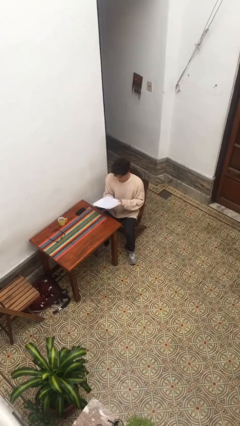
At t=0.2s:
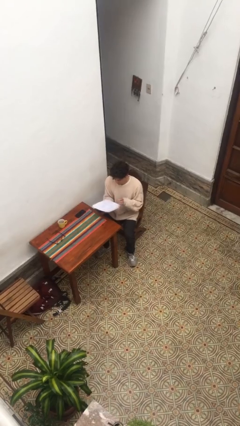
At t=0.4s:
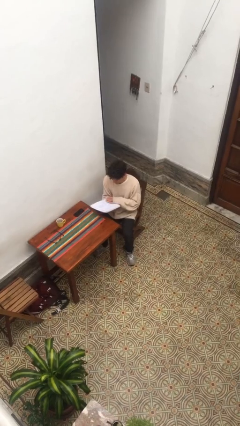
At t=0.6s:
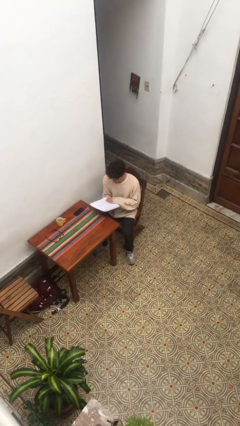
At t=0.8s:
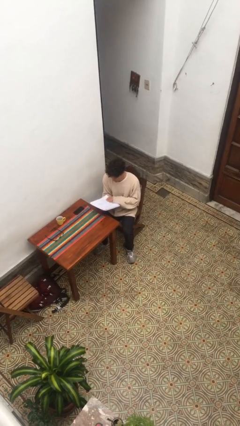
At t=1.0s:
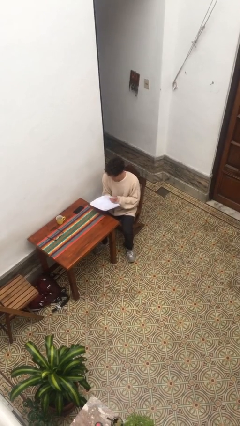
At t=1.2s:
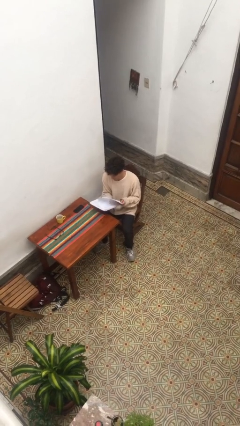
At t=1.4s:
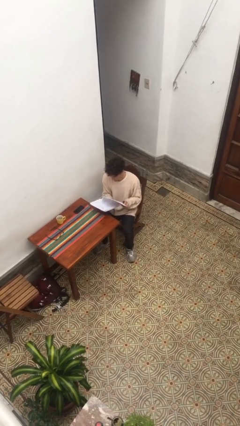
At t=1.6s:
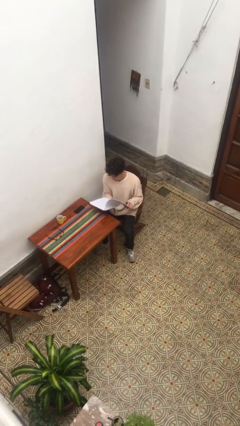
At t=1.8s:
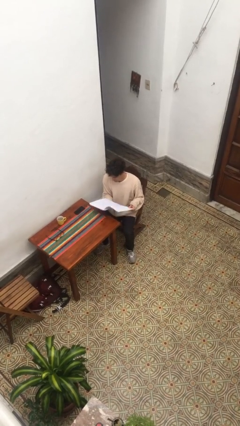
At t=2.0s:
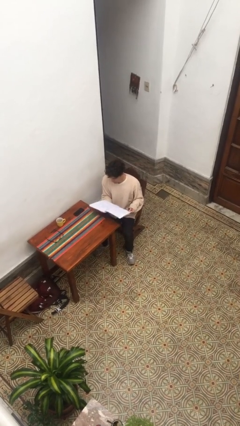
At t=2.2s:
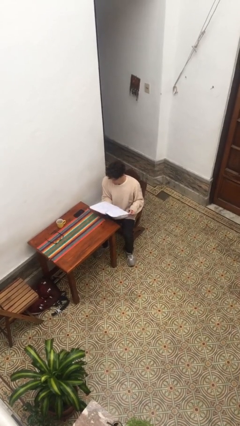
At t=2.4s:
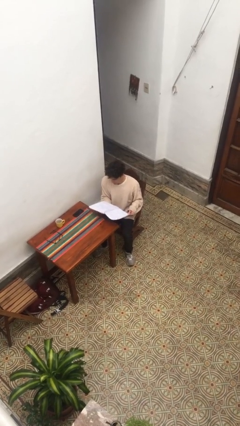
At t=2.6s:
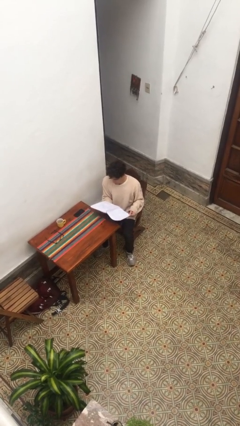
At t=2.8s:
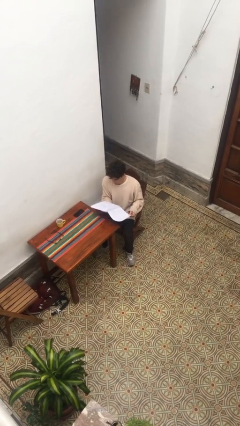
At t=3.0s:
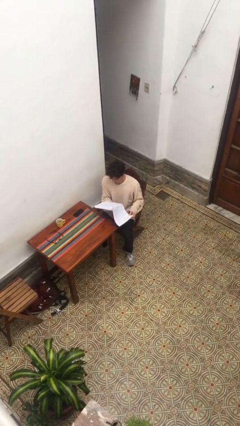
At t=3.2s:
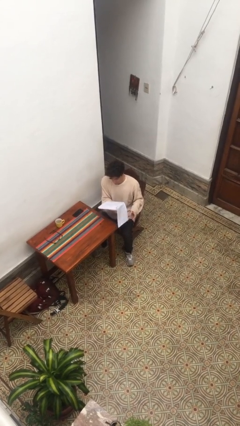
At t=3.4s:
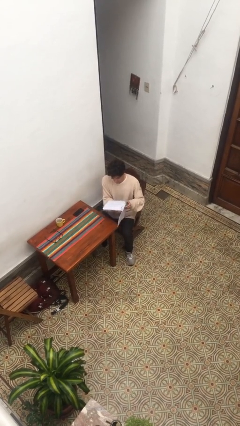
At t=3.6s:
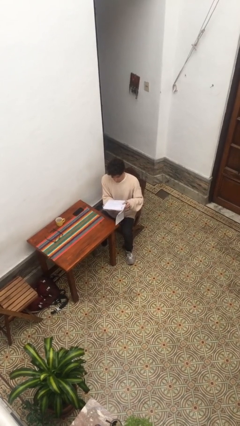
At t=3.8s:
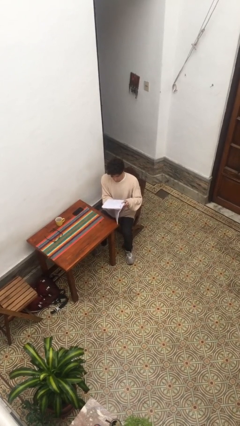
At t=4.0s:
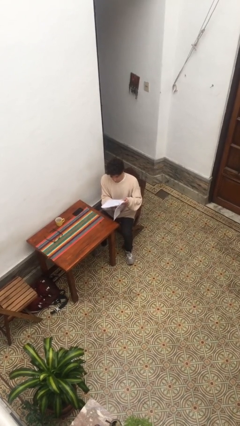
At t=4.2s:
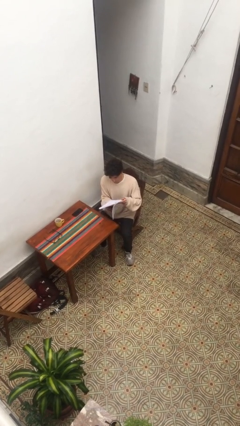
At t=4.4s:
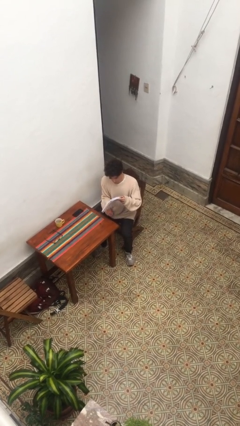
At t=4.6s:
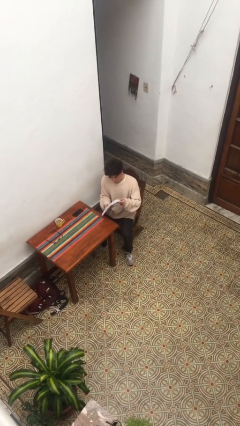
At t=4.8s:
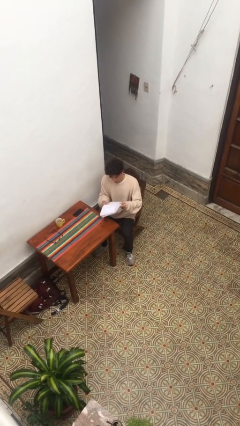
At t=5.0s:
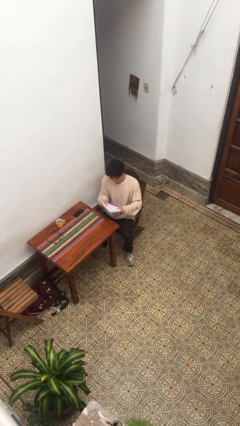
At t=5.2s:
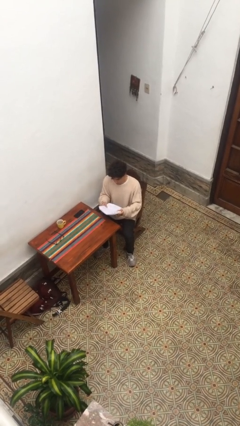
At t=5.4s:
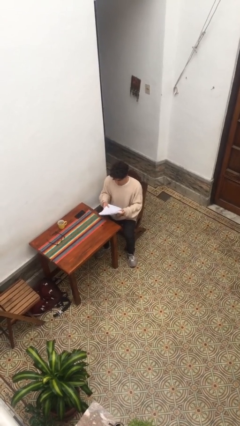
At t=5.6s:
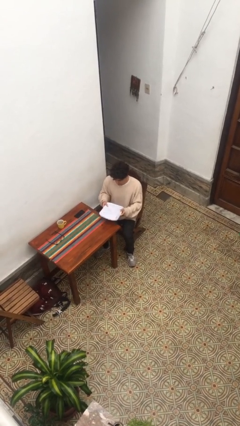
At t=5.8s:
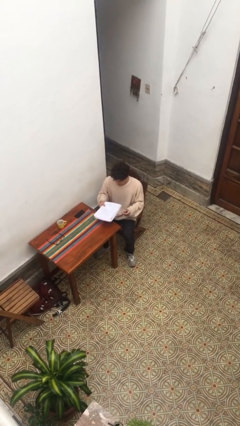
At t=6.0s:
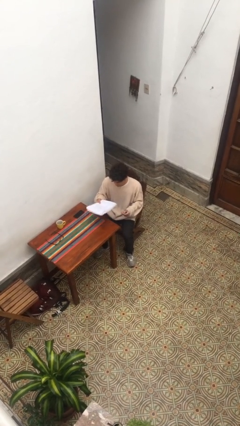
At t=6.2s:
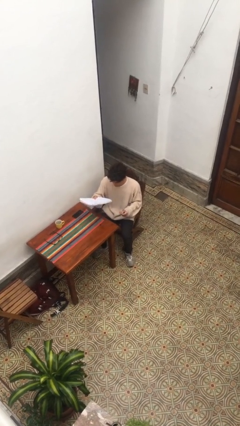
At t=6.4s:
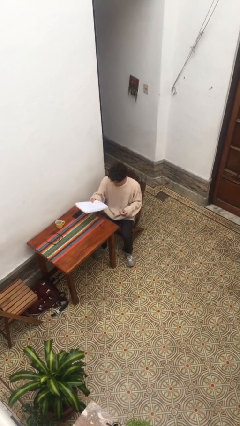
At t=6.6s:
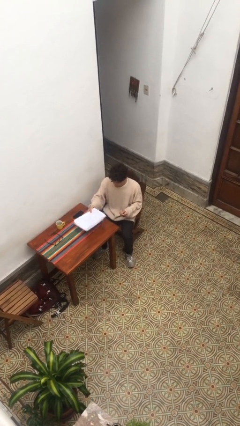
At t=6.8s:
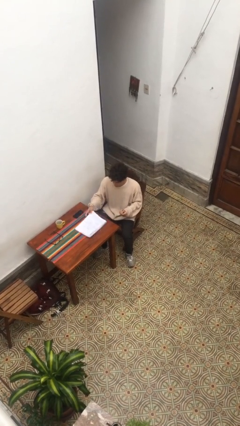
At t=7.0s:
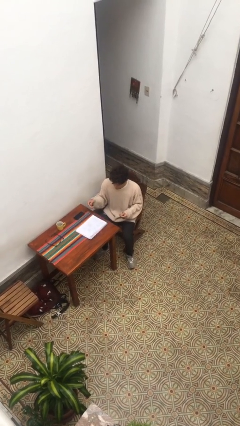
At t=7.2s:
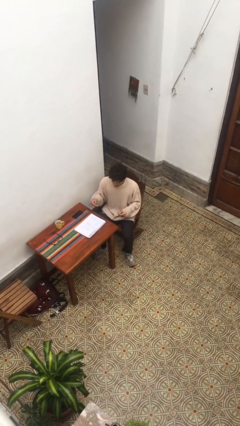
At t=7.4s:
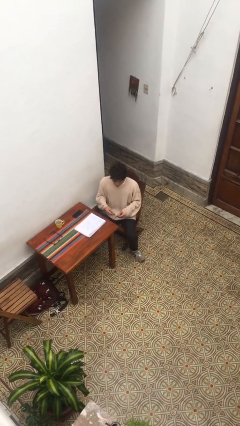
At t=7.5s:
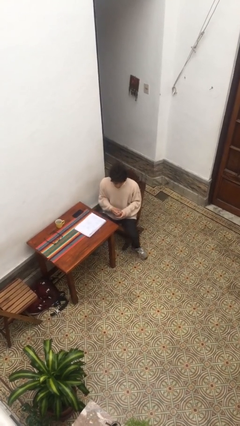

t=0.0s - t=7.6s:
person reads document

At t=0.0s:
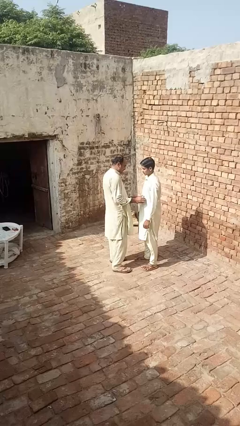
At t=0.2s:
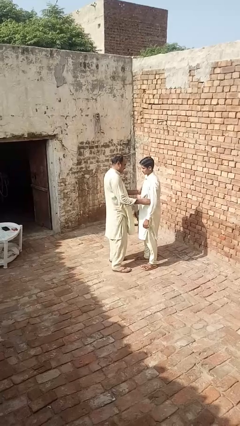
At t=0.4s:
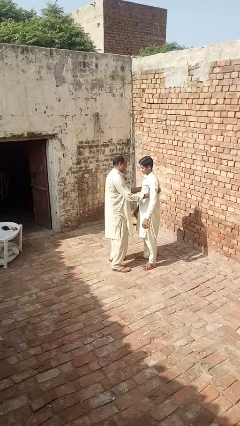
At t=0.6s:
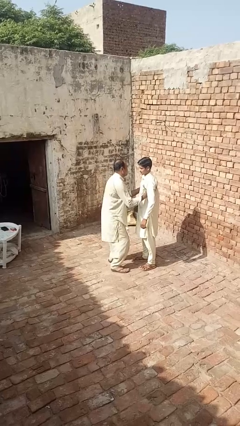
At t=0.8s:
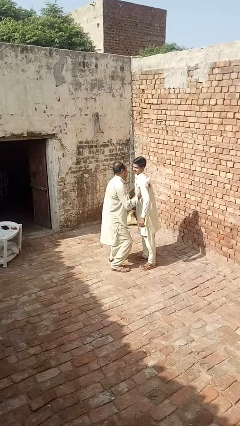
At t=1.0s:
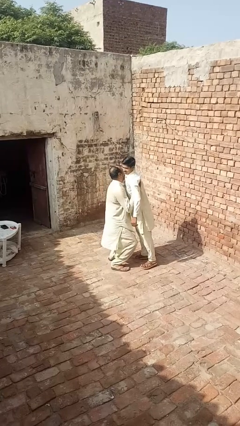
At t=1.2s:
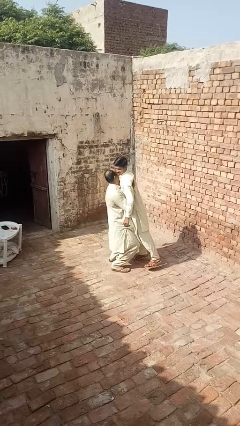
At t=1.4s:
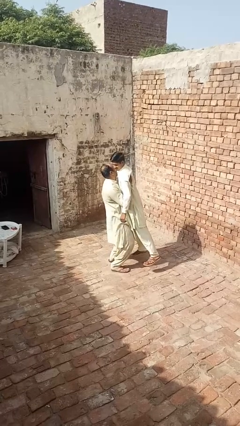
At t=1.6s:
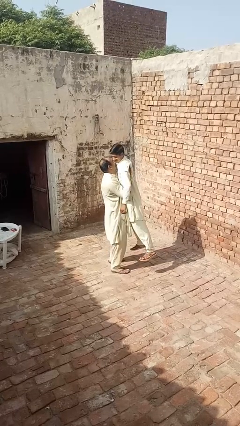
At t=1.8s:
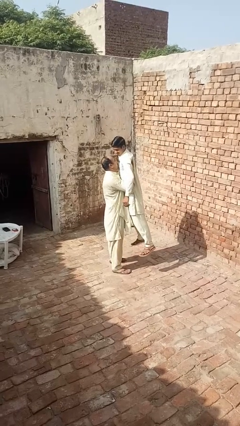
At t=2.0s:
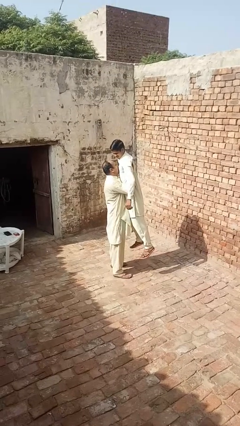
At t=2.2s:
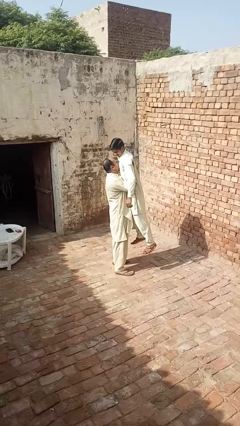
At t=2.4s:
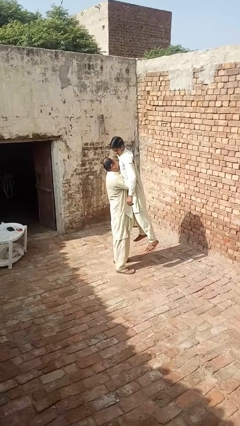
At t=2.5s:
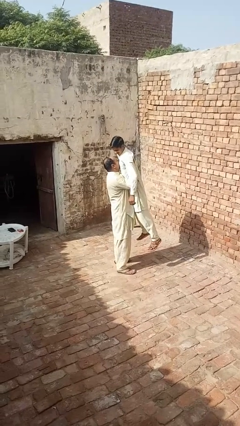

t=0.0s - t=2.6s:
person picks up person

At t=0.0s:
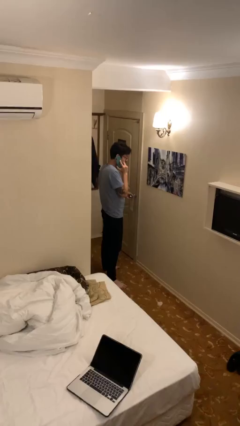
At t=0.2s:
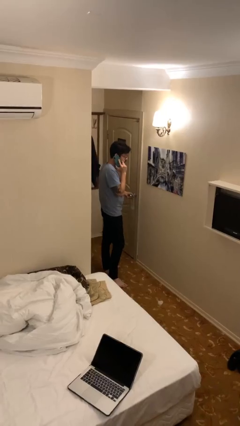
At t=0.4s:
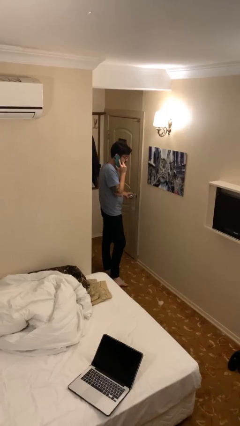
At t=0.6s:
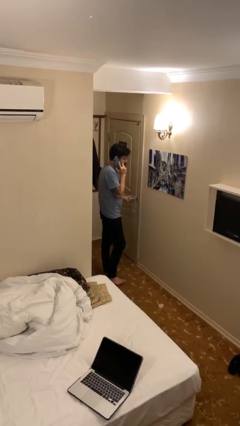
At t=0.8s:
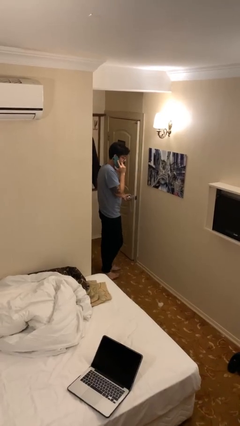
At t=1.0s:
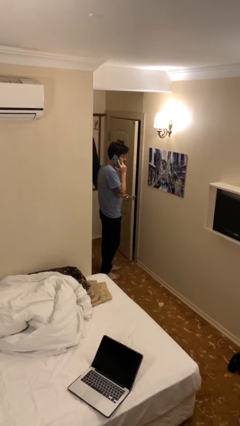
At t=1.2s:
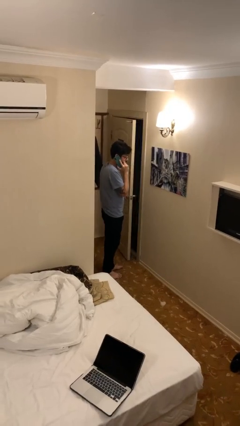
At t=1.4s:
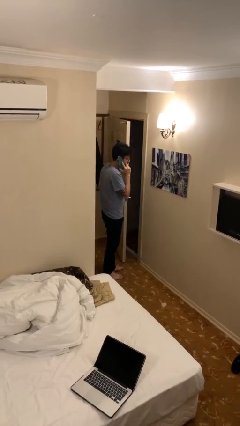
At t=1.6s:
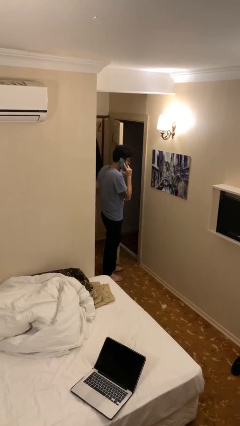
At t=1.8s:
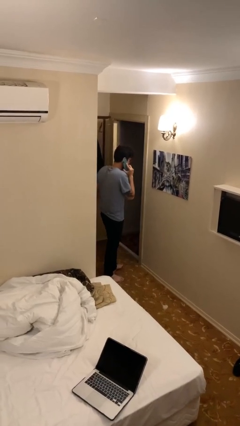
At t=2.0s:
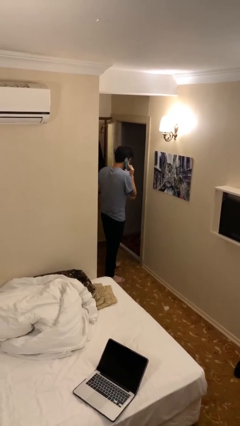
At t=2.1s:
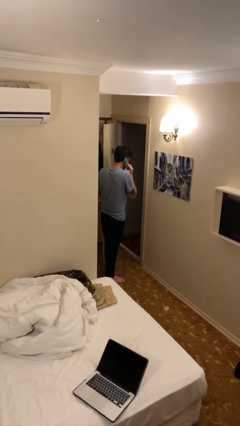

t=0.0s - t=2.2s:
person opens facility door

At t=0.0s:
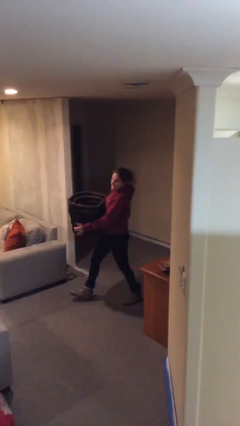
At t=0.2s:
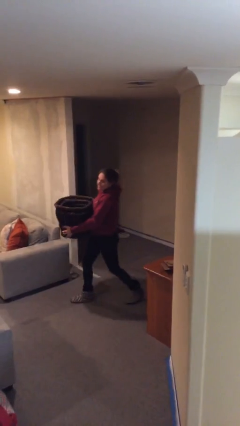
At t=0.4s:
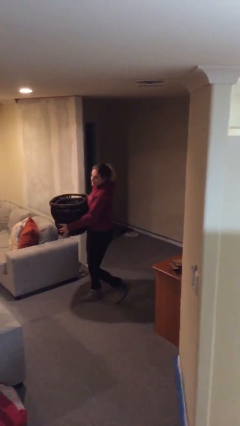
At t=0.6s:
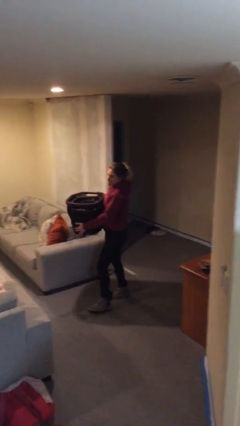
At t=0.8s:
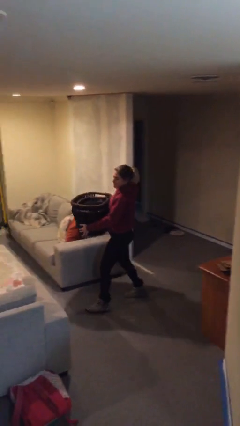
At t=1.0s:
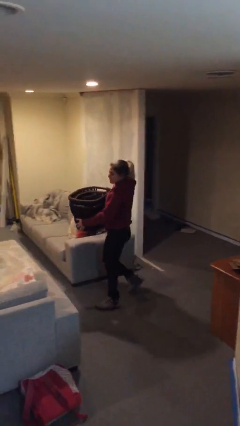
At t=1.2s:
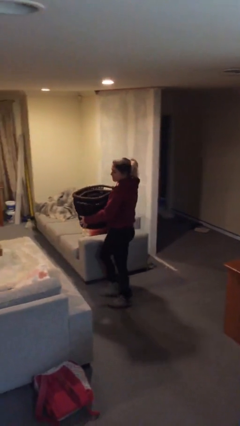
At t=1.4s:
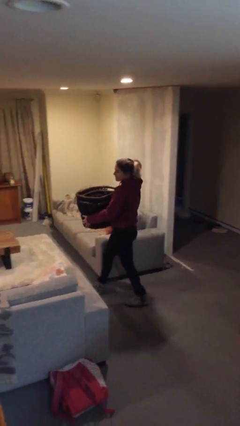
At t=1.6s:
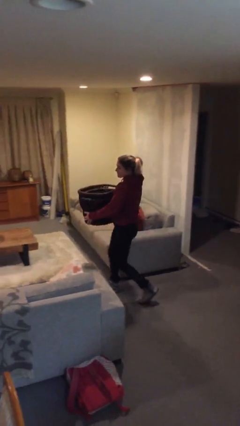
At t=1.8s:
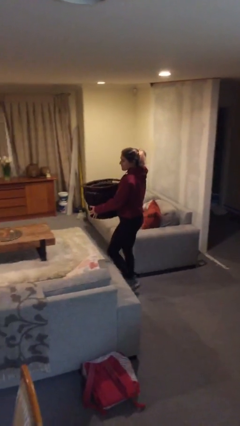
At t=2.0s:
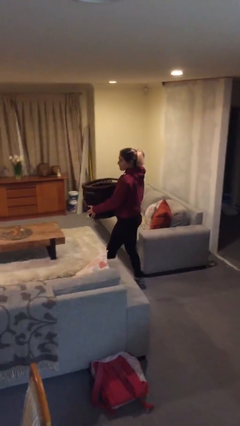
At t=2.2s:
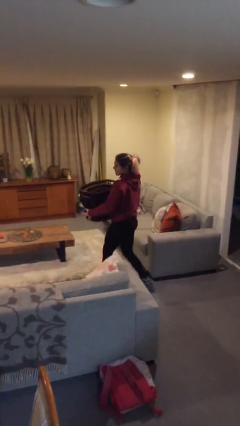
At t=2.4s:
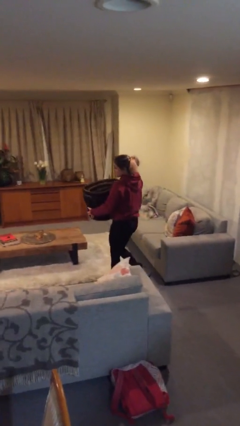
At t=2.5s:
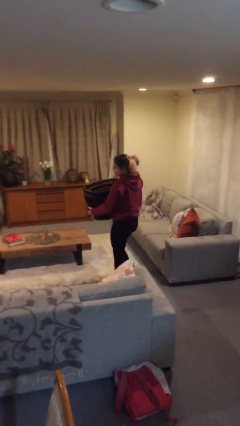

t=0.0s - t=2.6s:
person carries heavy object

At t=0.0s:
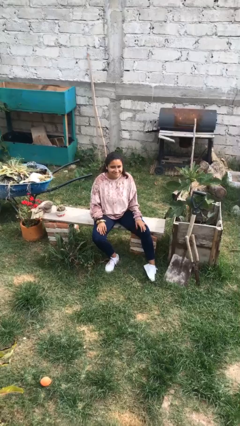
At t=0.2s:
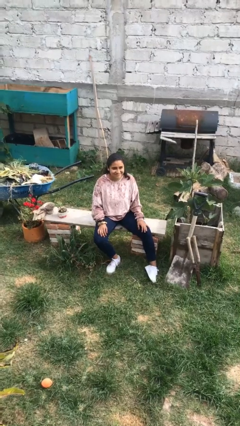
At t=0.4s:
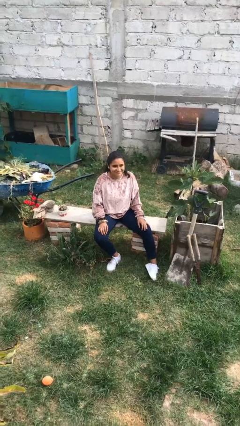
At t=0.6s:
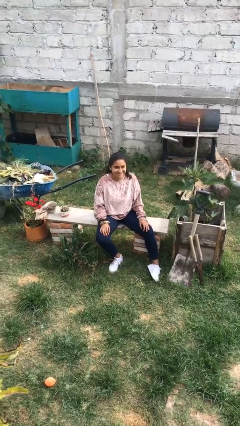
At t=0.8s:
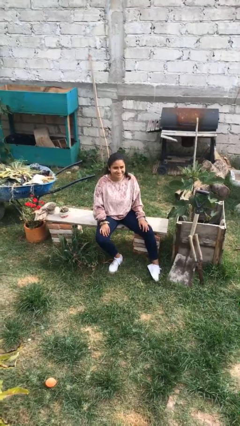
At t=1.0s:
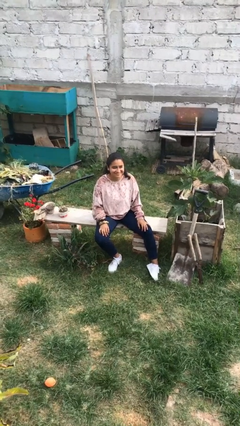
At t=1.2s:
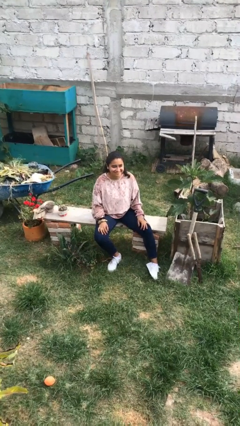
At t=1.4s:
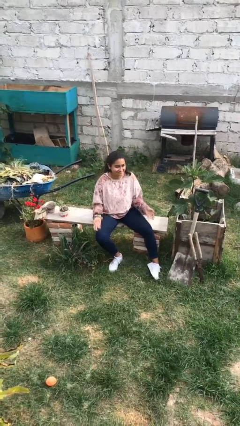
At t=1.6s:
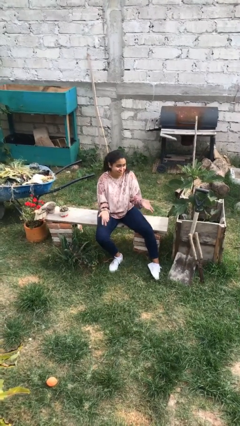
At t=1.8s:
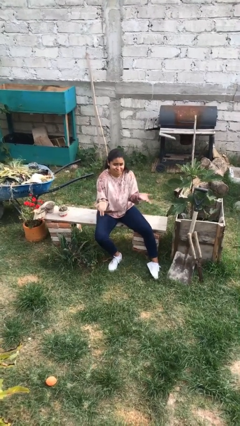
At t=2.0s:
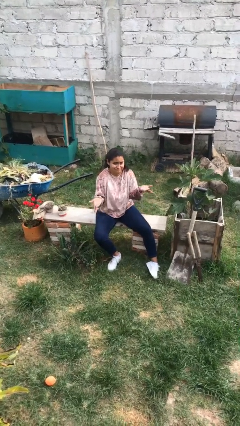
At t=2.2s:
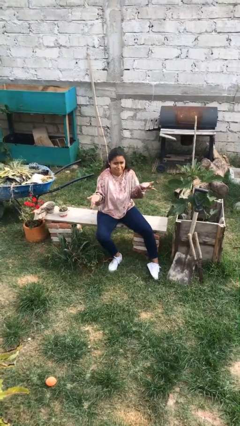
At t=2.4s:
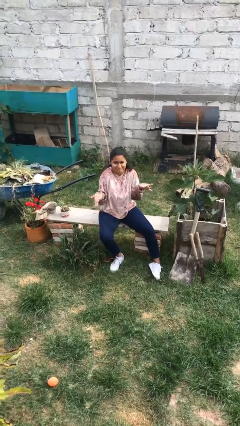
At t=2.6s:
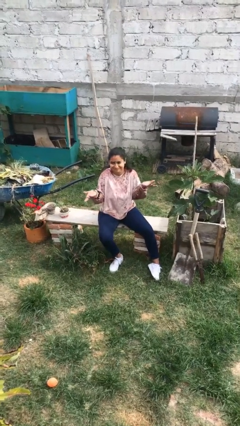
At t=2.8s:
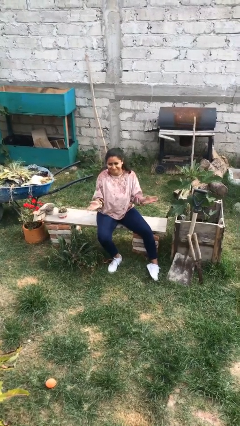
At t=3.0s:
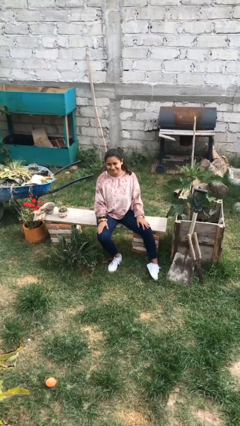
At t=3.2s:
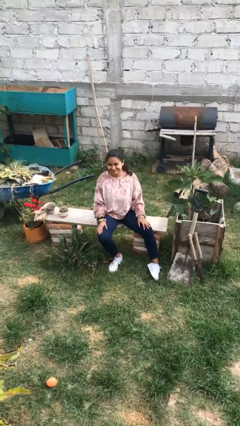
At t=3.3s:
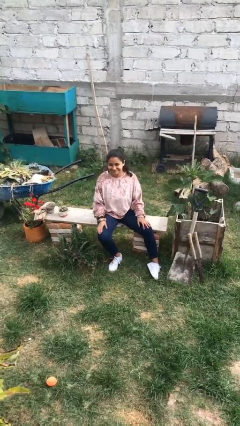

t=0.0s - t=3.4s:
person shrugs
